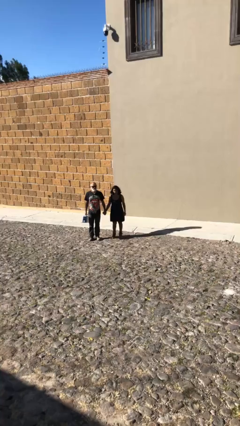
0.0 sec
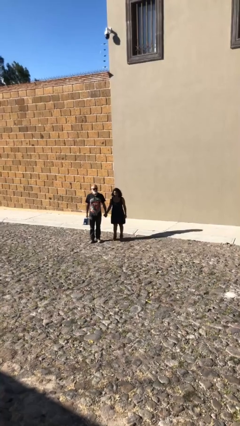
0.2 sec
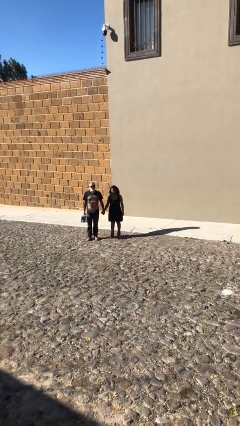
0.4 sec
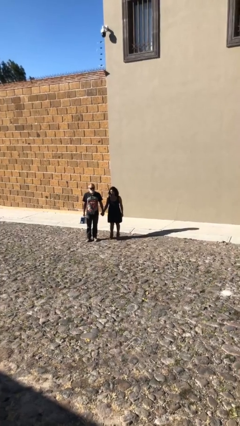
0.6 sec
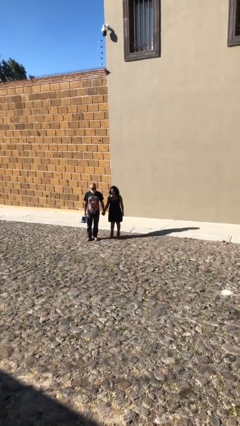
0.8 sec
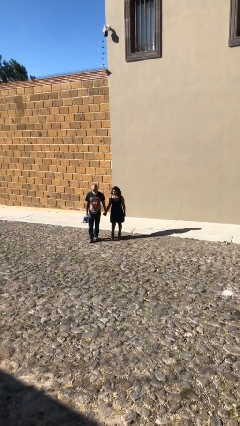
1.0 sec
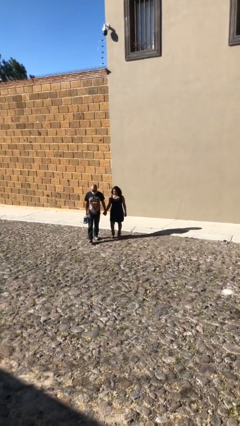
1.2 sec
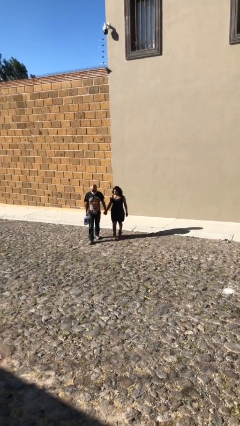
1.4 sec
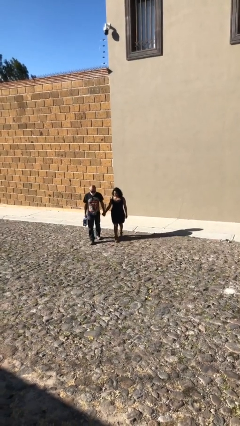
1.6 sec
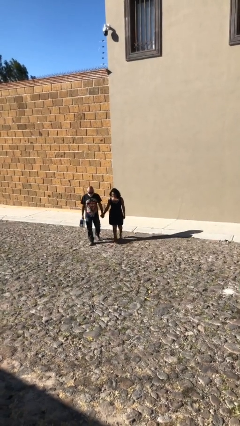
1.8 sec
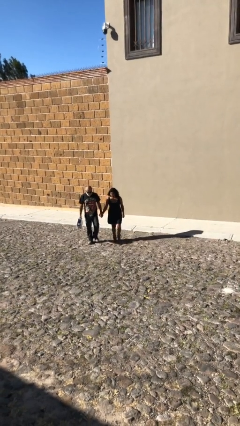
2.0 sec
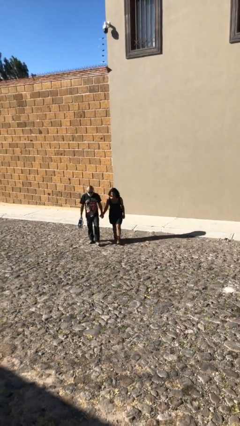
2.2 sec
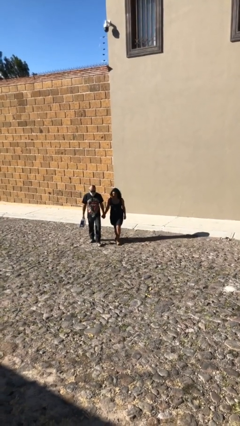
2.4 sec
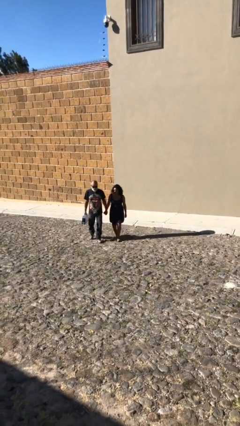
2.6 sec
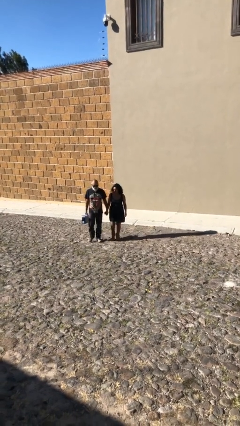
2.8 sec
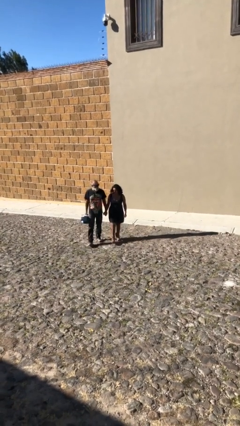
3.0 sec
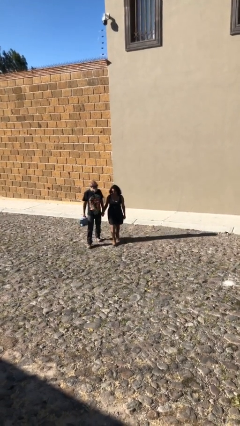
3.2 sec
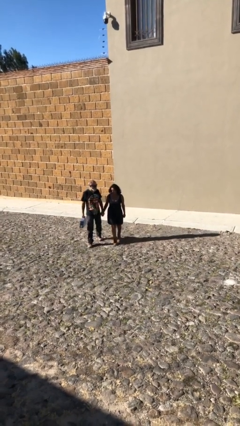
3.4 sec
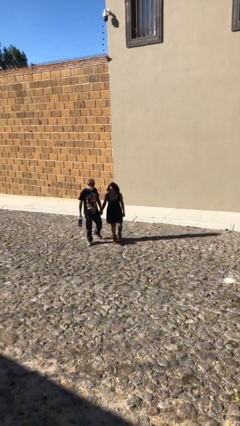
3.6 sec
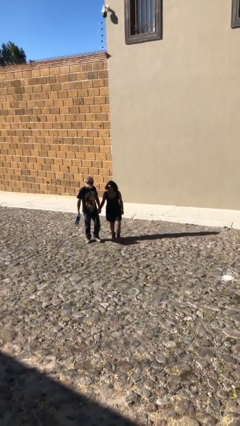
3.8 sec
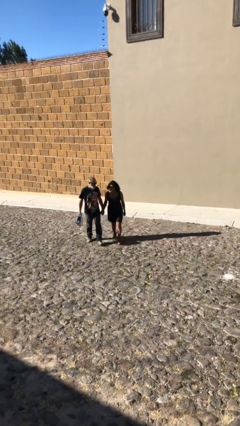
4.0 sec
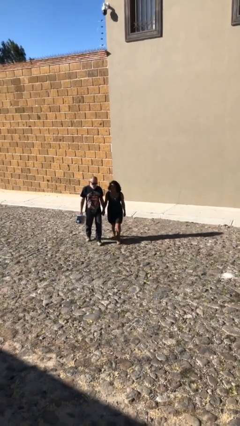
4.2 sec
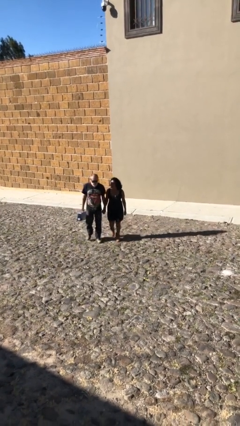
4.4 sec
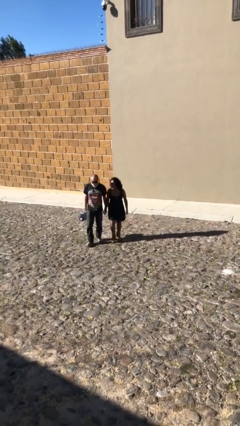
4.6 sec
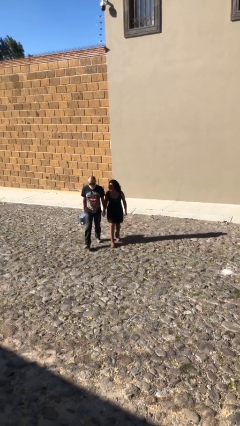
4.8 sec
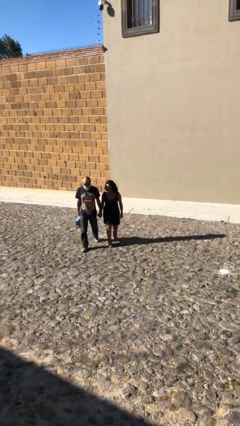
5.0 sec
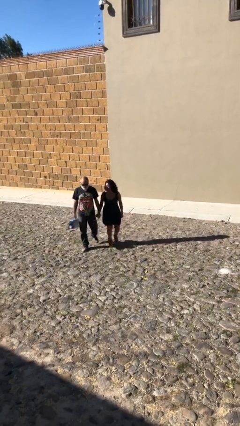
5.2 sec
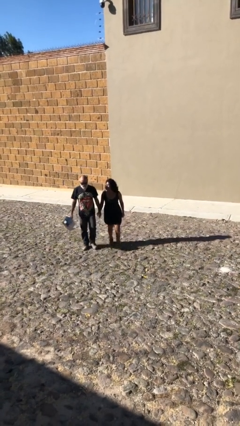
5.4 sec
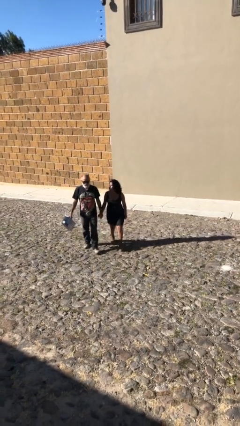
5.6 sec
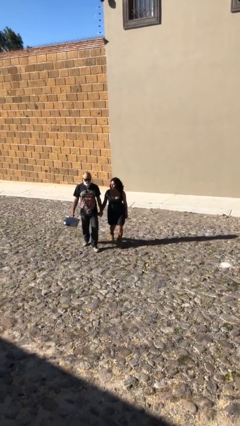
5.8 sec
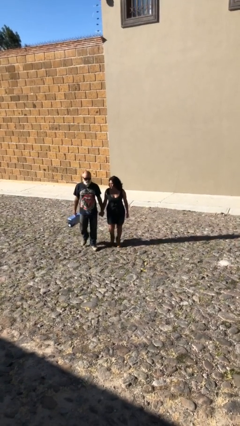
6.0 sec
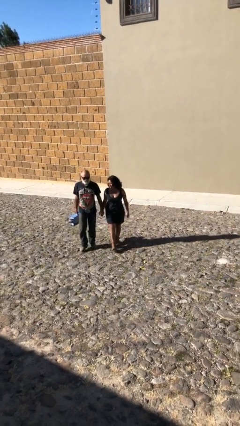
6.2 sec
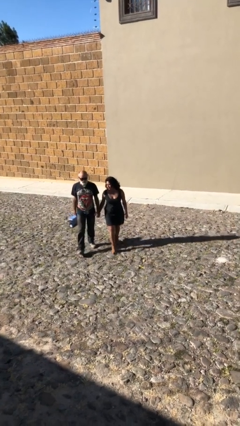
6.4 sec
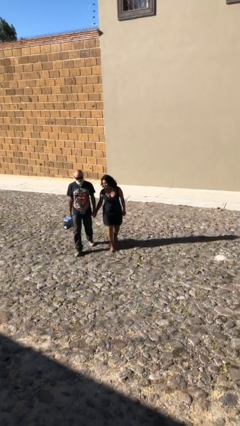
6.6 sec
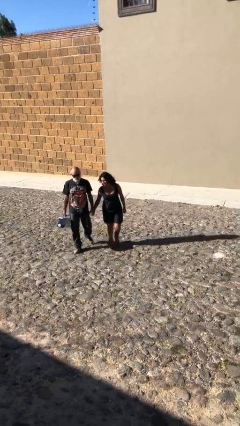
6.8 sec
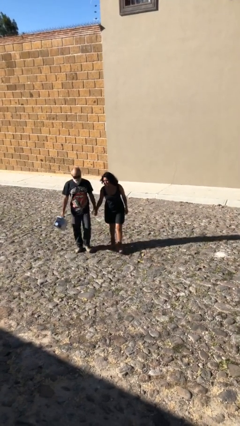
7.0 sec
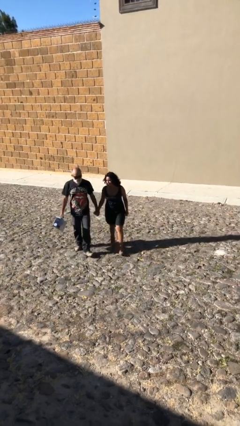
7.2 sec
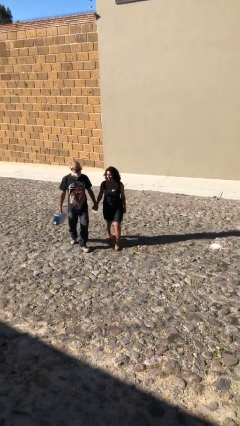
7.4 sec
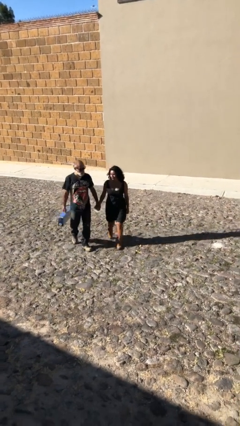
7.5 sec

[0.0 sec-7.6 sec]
person holds hand

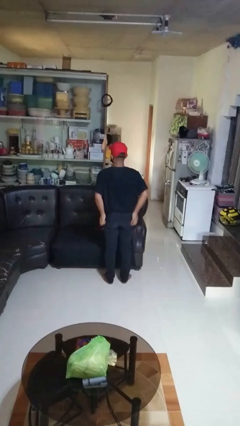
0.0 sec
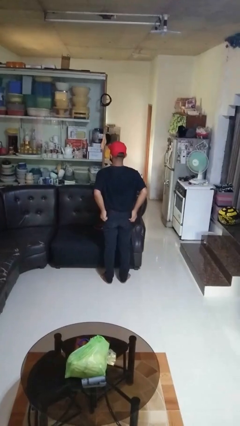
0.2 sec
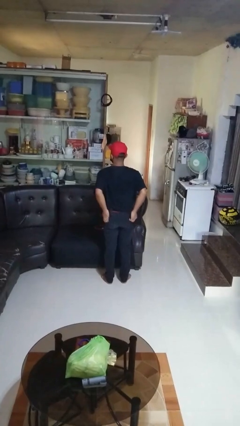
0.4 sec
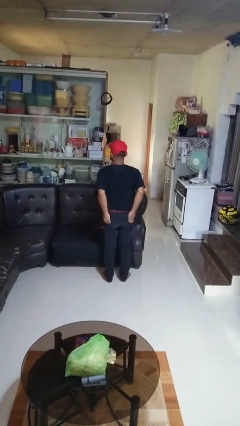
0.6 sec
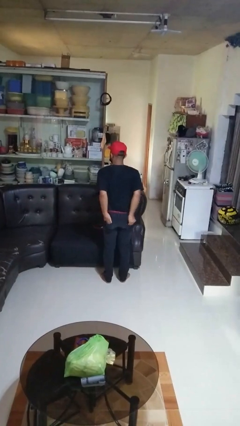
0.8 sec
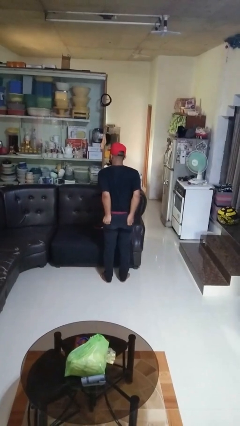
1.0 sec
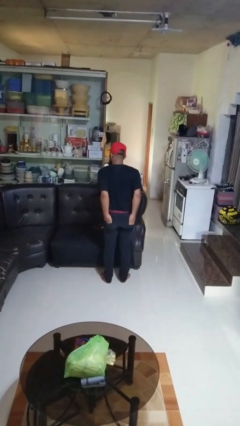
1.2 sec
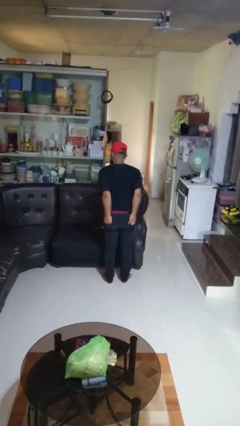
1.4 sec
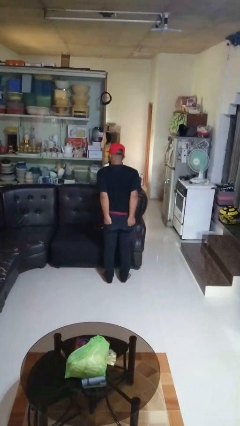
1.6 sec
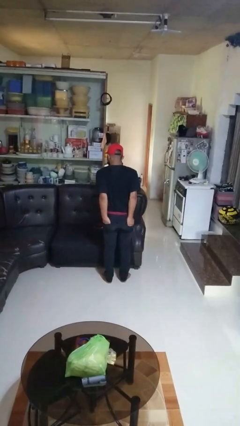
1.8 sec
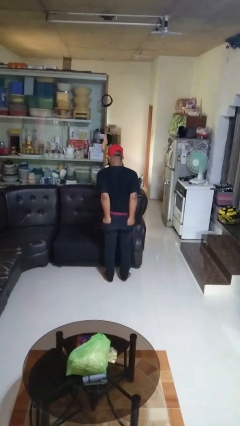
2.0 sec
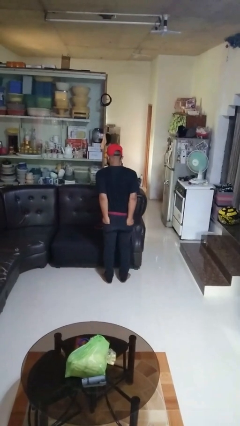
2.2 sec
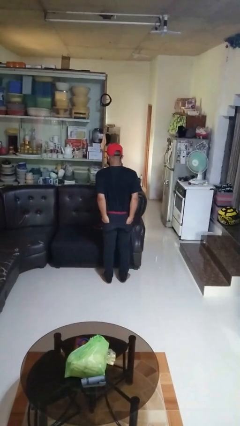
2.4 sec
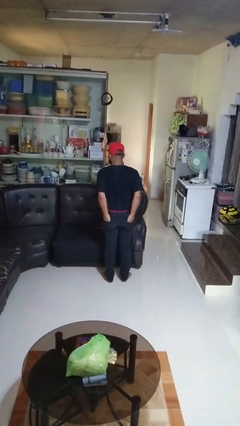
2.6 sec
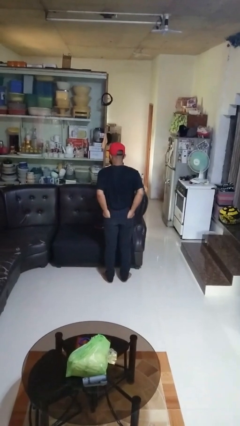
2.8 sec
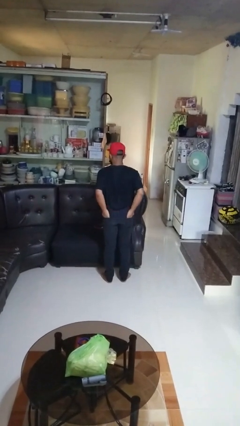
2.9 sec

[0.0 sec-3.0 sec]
person puts hands in back pockets

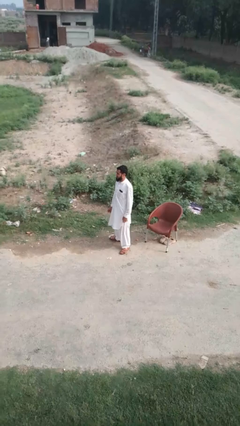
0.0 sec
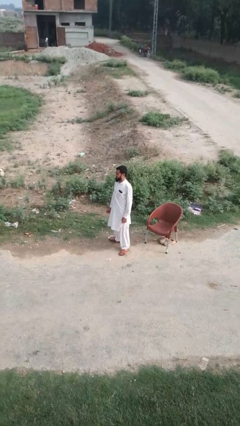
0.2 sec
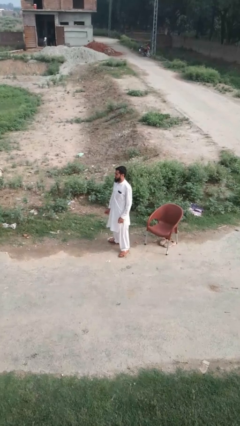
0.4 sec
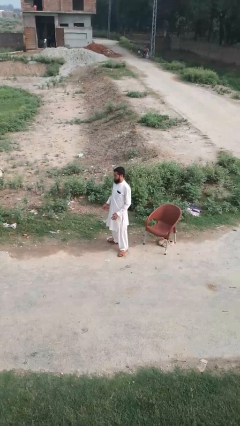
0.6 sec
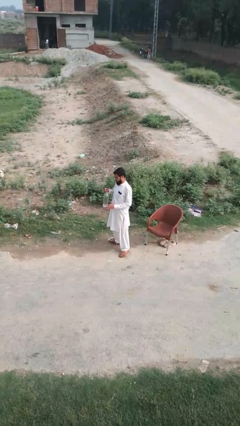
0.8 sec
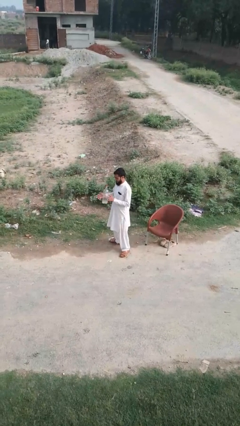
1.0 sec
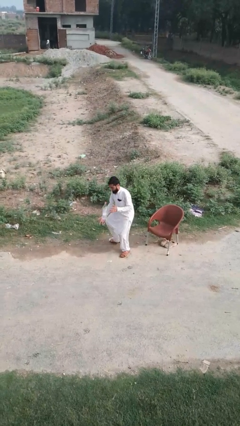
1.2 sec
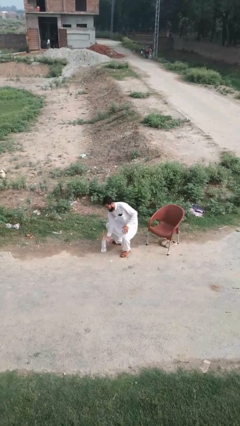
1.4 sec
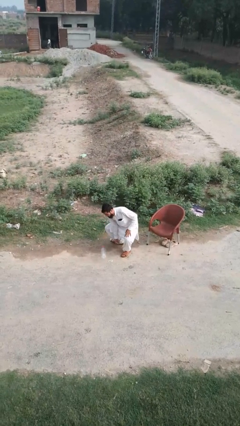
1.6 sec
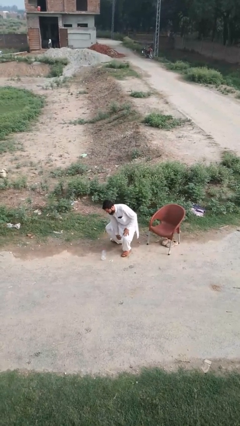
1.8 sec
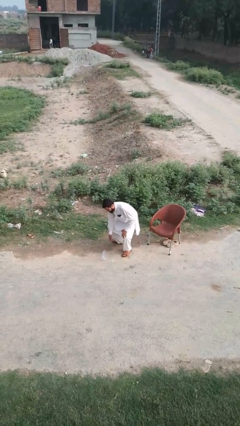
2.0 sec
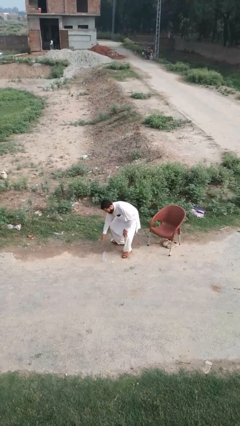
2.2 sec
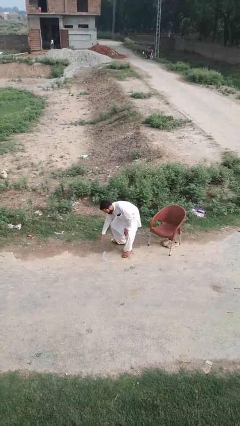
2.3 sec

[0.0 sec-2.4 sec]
person drops object

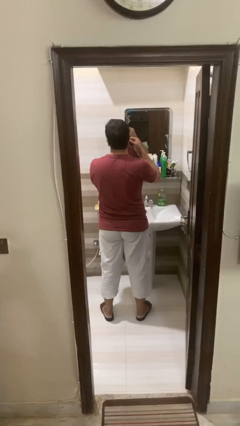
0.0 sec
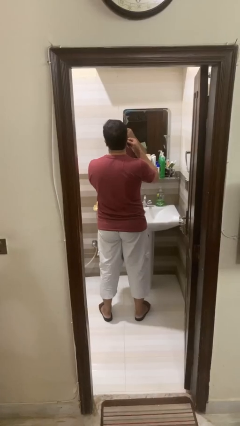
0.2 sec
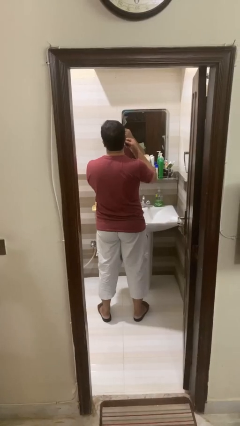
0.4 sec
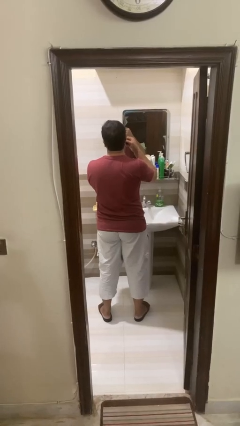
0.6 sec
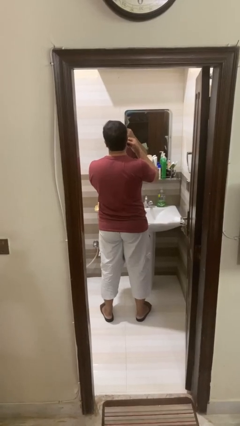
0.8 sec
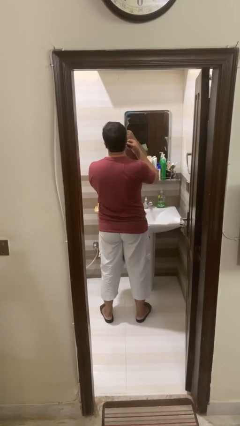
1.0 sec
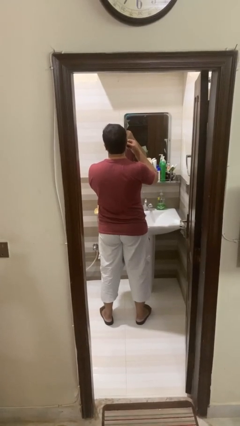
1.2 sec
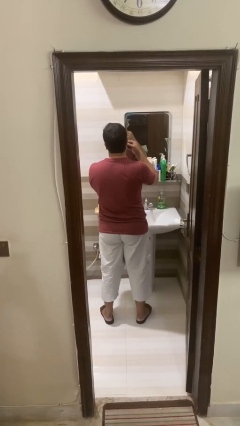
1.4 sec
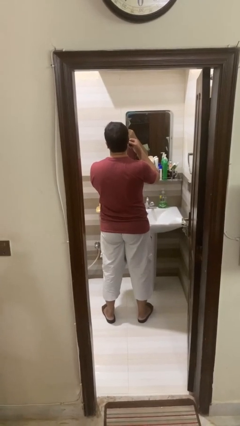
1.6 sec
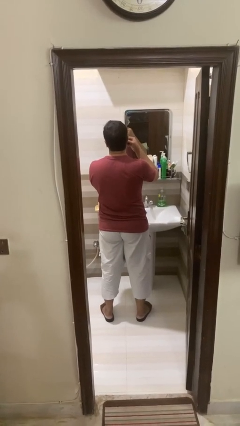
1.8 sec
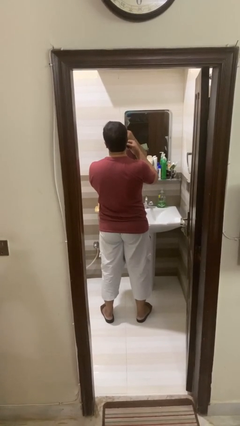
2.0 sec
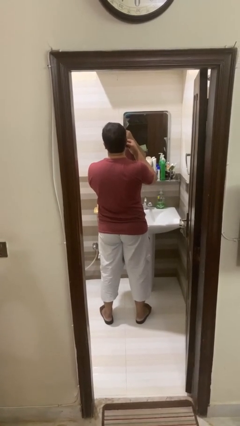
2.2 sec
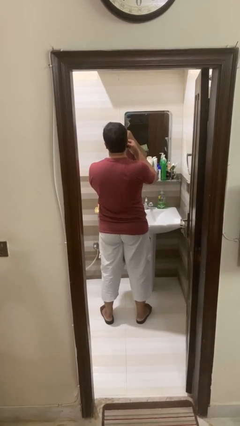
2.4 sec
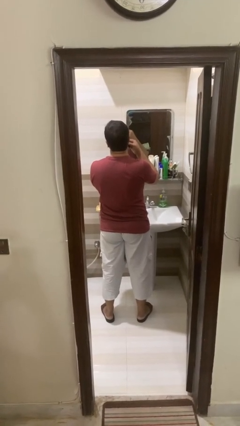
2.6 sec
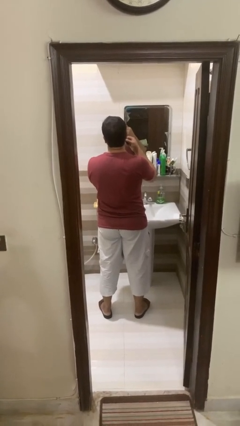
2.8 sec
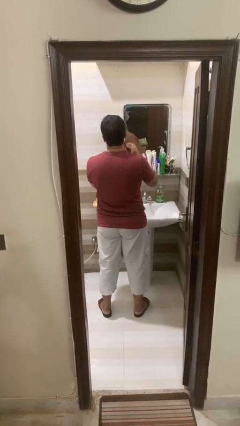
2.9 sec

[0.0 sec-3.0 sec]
person shaves face

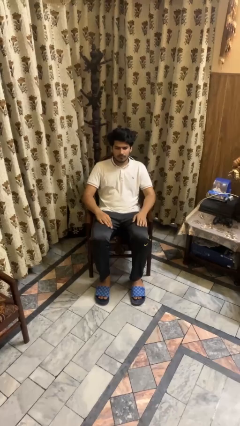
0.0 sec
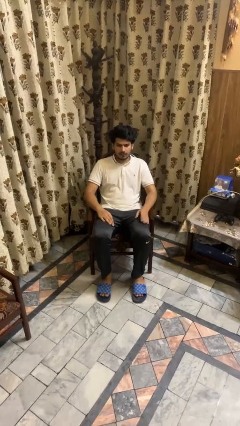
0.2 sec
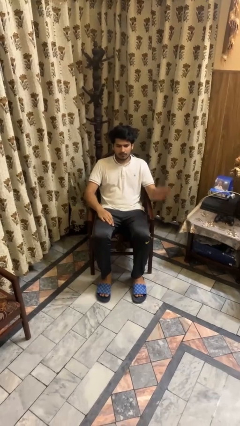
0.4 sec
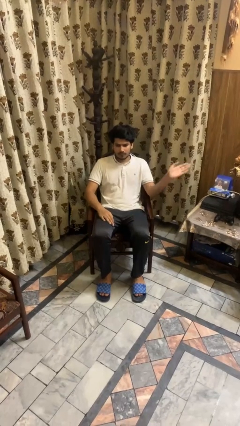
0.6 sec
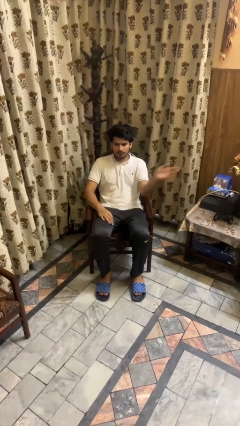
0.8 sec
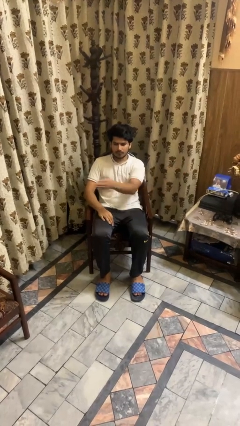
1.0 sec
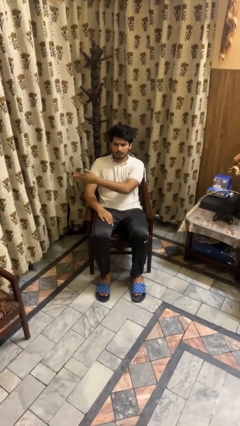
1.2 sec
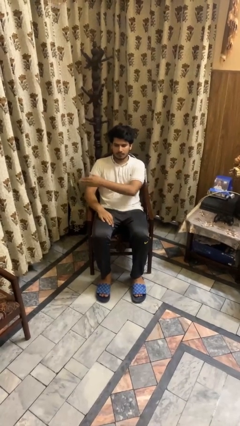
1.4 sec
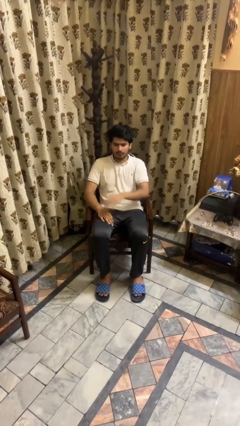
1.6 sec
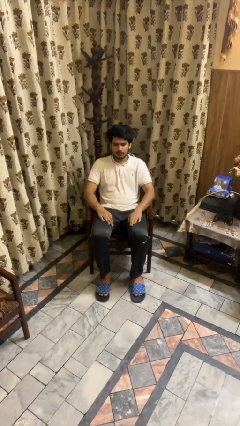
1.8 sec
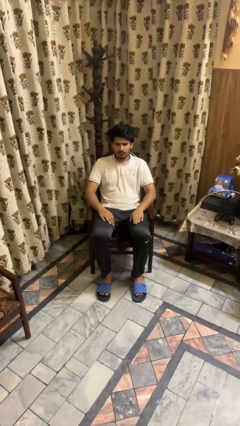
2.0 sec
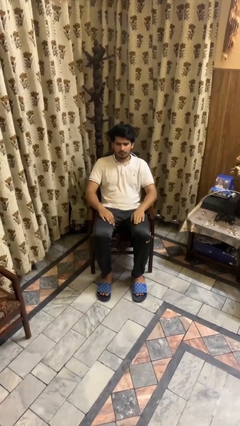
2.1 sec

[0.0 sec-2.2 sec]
person gestures swipe right
